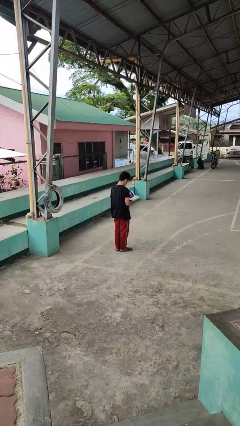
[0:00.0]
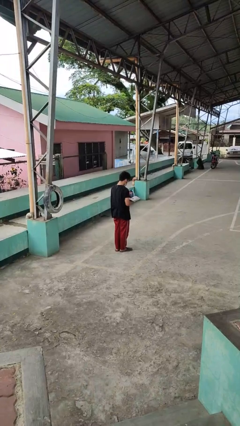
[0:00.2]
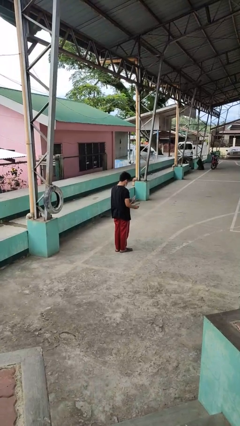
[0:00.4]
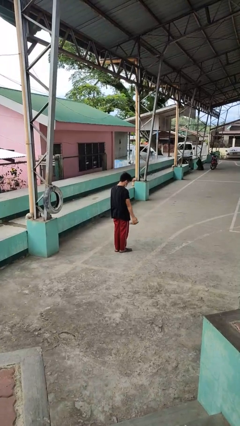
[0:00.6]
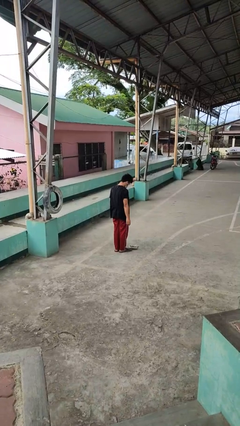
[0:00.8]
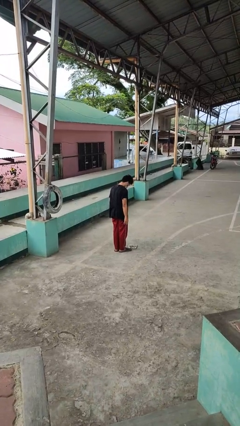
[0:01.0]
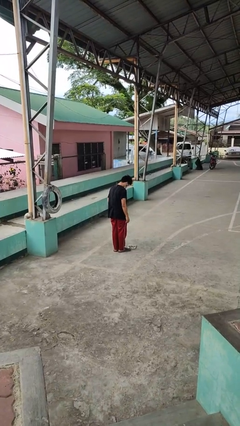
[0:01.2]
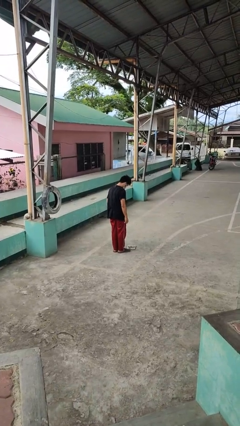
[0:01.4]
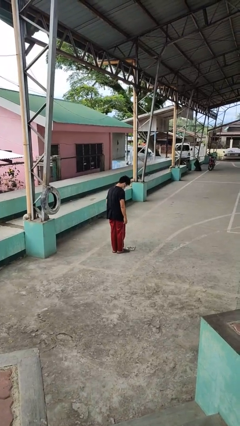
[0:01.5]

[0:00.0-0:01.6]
person drops object

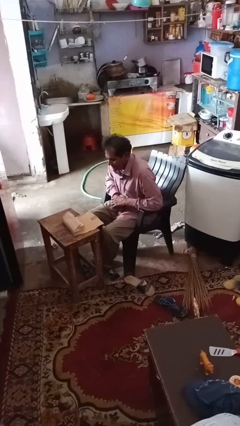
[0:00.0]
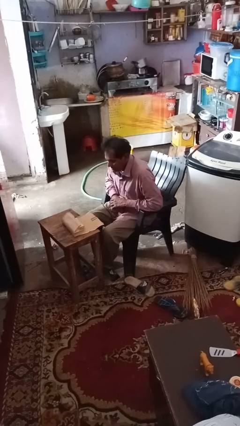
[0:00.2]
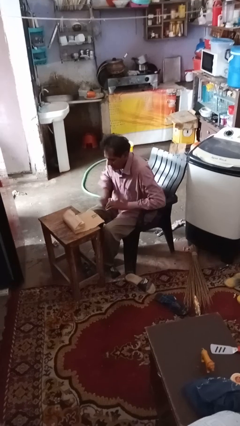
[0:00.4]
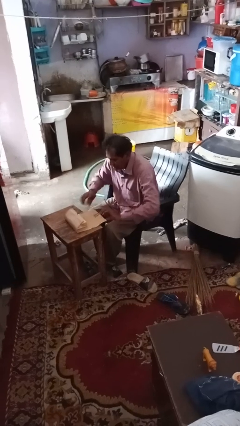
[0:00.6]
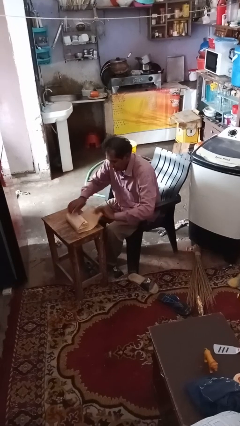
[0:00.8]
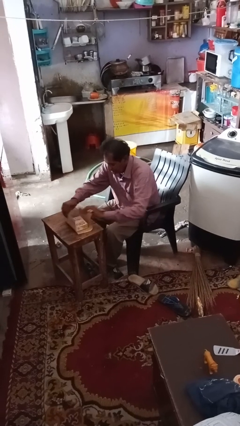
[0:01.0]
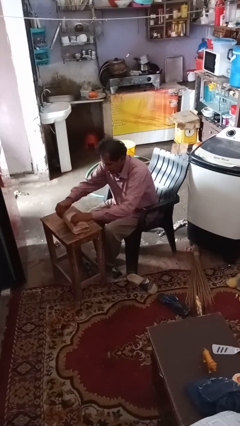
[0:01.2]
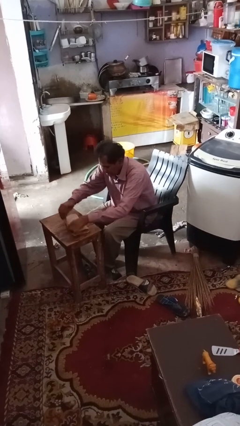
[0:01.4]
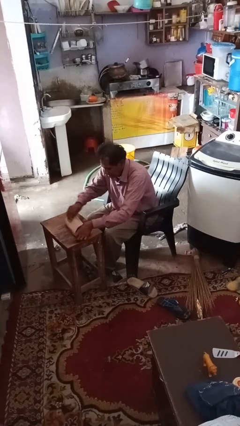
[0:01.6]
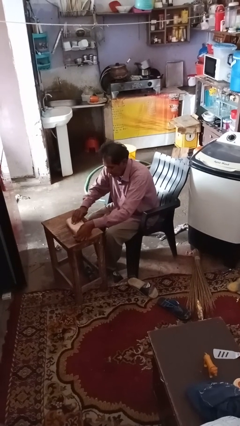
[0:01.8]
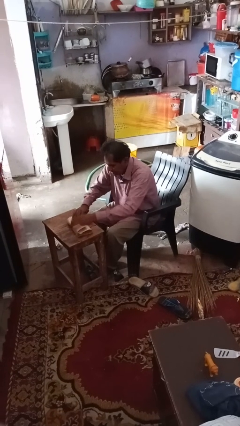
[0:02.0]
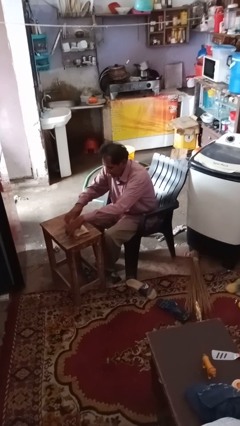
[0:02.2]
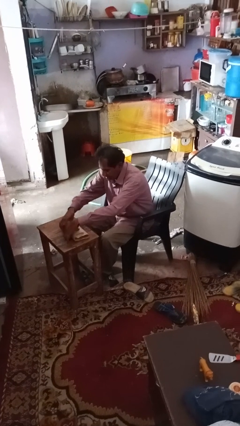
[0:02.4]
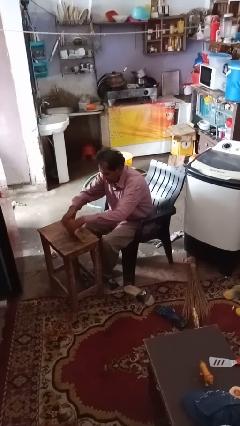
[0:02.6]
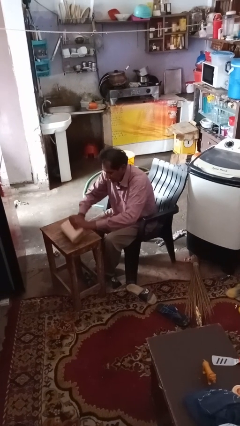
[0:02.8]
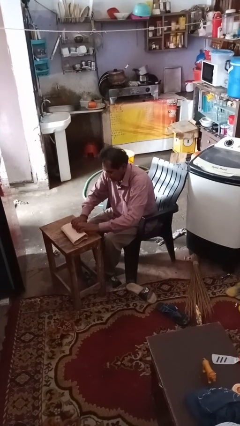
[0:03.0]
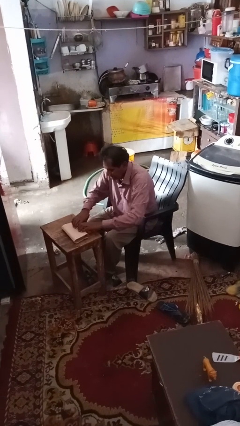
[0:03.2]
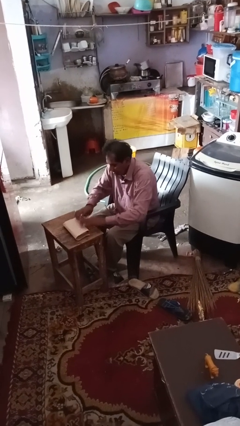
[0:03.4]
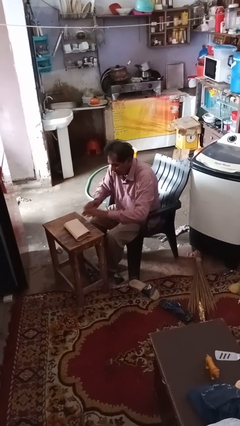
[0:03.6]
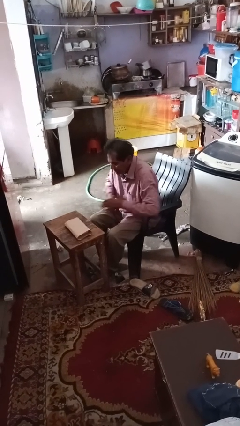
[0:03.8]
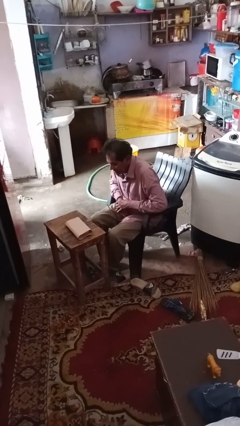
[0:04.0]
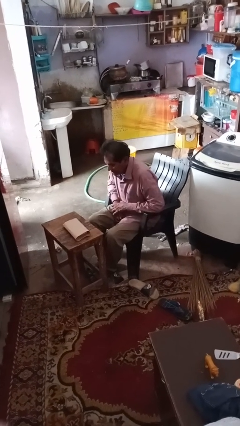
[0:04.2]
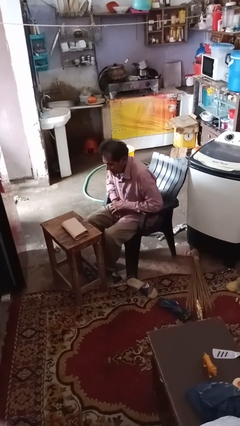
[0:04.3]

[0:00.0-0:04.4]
person wraps box

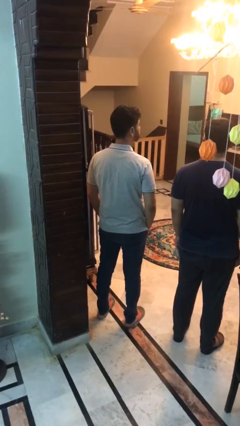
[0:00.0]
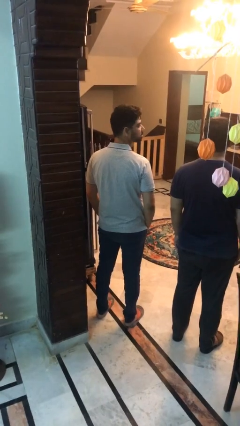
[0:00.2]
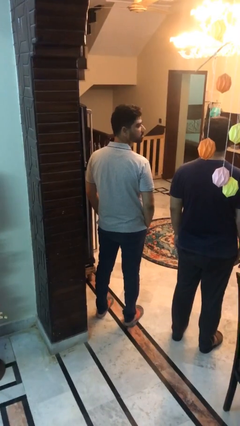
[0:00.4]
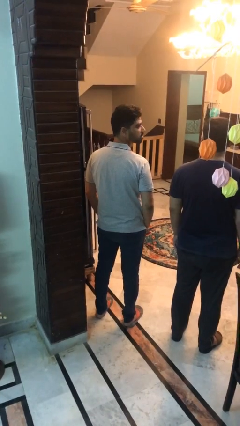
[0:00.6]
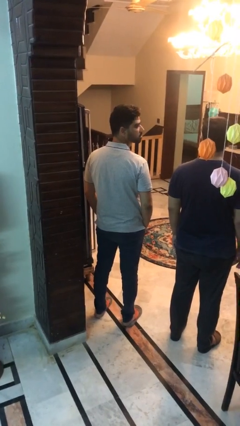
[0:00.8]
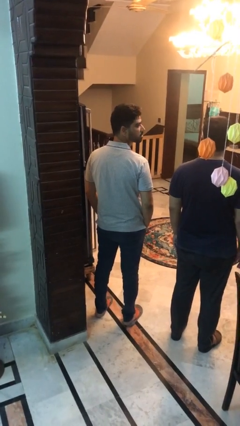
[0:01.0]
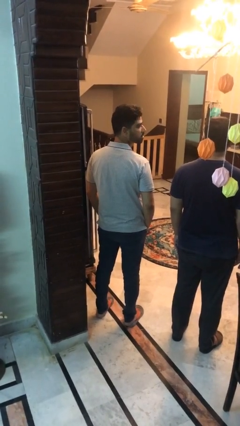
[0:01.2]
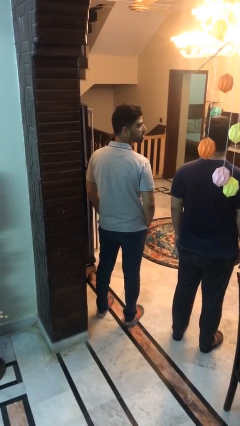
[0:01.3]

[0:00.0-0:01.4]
person looks over shoulder

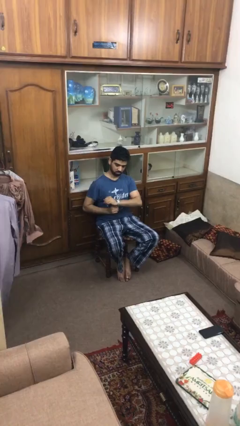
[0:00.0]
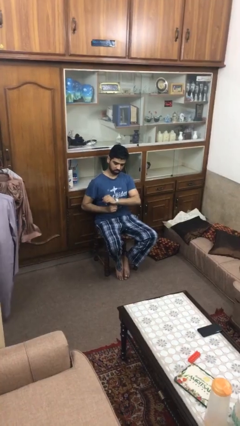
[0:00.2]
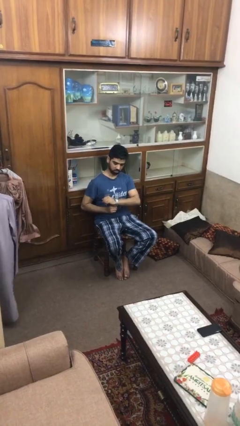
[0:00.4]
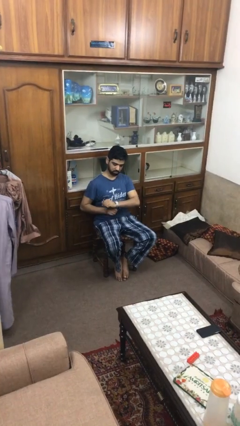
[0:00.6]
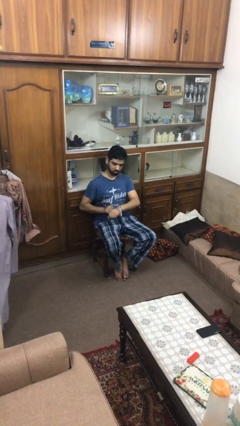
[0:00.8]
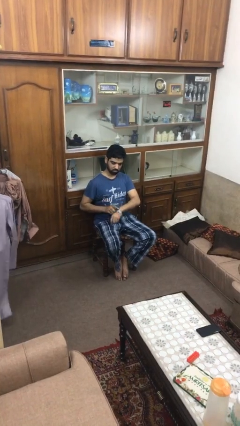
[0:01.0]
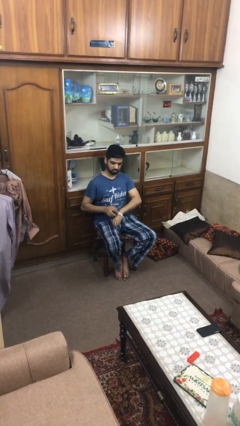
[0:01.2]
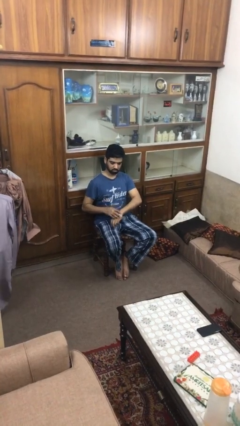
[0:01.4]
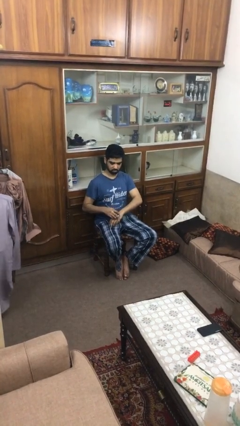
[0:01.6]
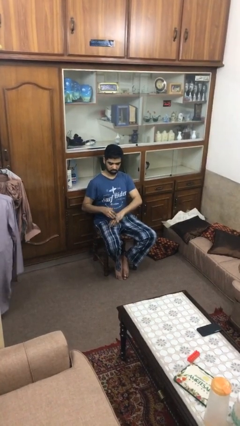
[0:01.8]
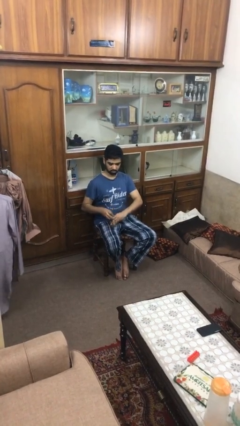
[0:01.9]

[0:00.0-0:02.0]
person takes off wristwatch

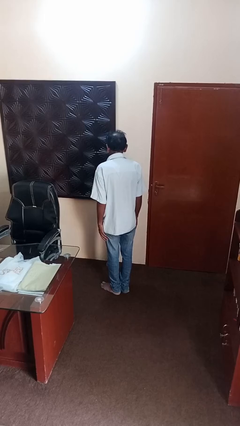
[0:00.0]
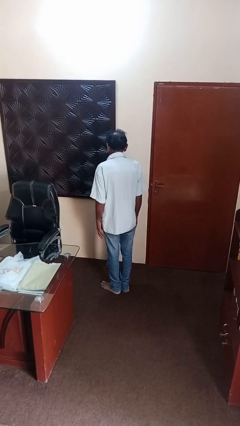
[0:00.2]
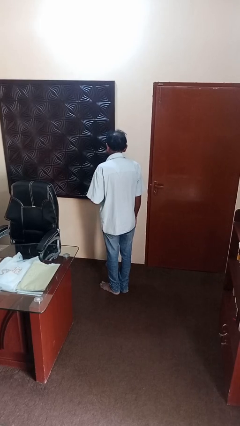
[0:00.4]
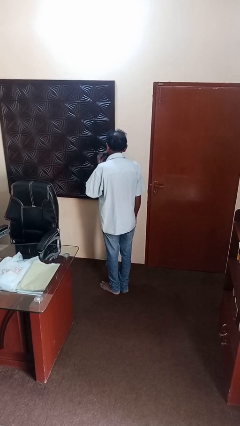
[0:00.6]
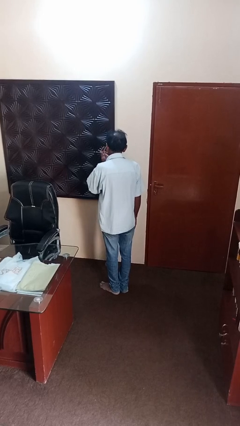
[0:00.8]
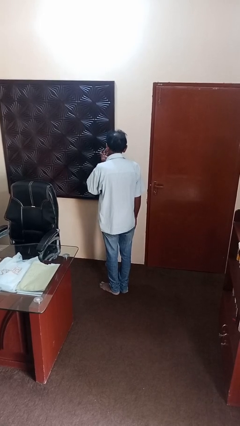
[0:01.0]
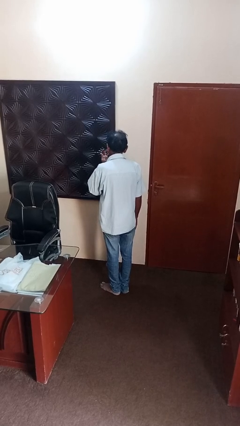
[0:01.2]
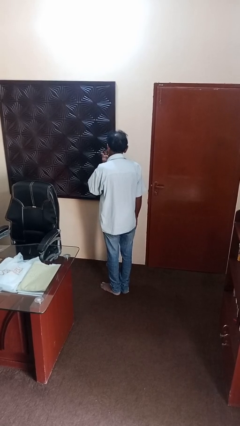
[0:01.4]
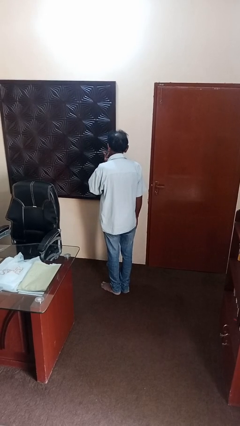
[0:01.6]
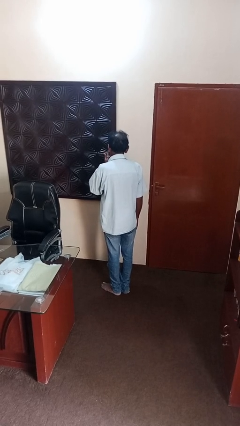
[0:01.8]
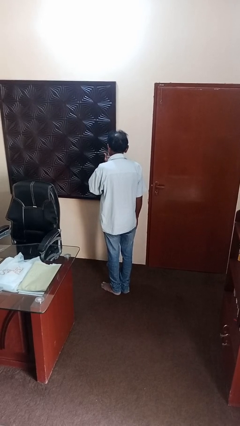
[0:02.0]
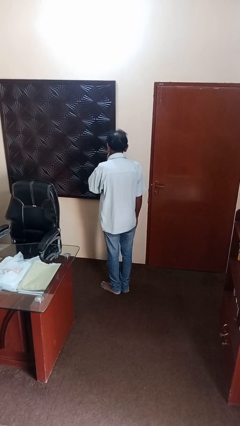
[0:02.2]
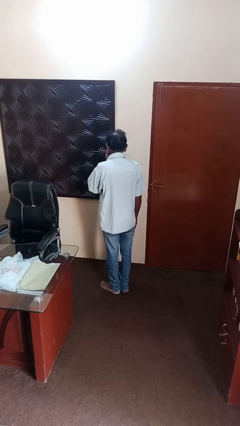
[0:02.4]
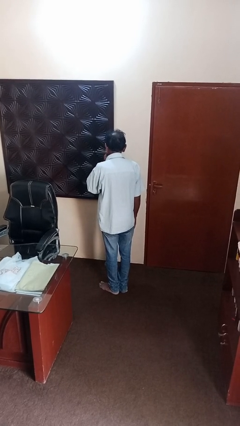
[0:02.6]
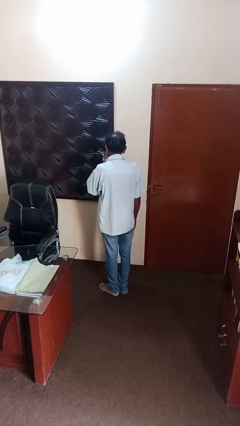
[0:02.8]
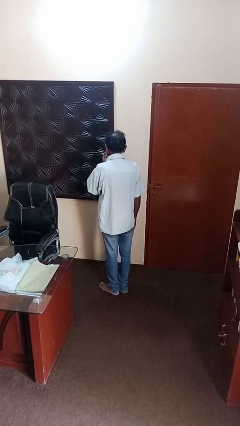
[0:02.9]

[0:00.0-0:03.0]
person licks fingers

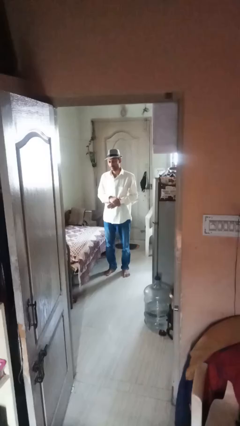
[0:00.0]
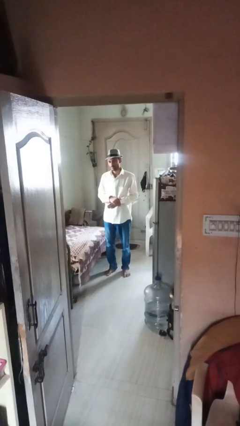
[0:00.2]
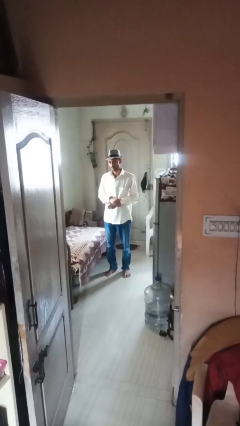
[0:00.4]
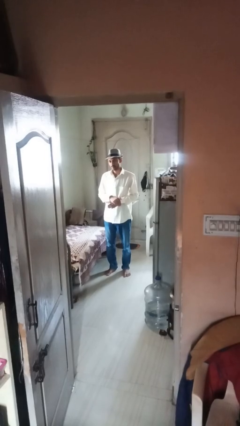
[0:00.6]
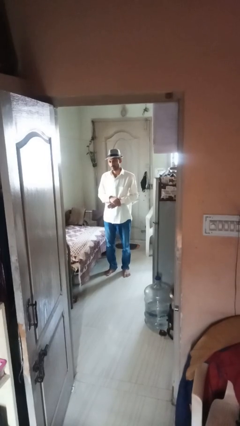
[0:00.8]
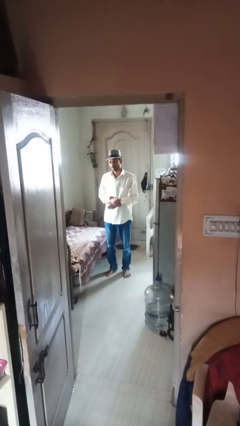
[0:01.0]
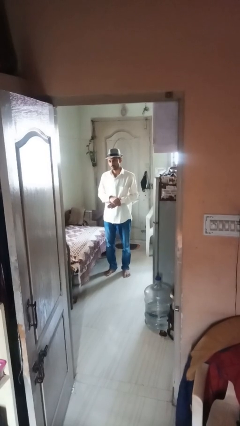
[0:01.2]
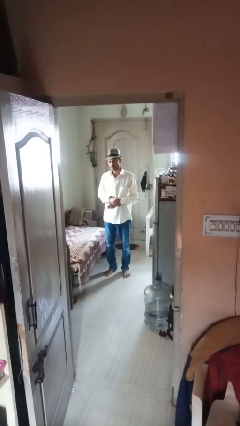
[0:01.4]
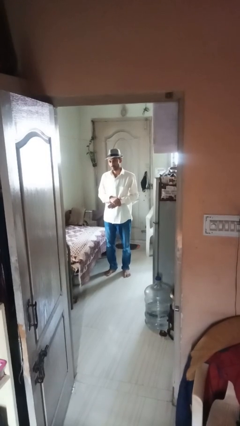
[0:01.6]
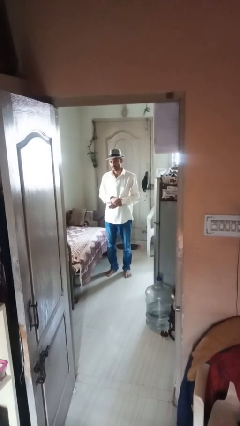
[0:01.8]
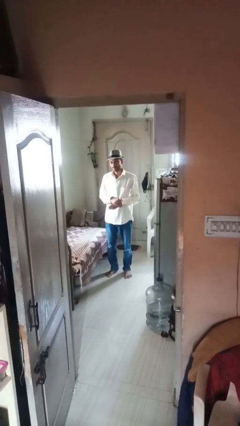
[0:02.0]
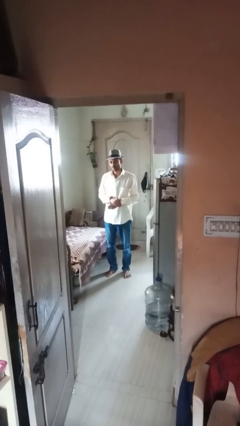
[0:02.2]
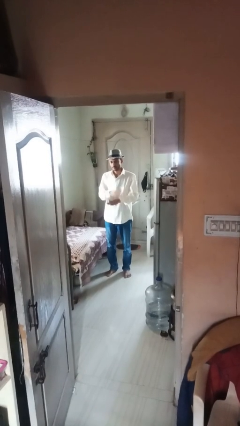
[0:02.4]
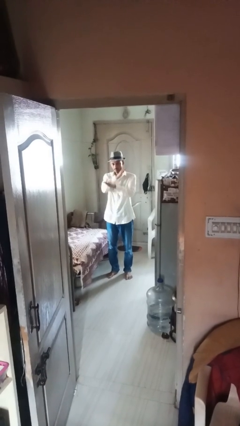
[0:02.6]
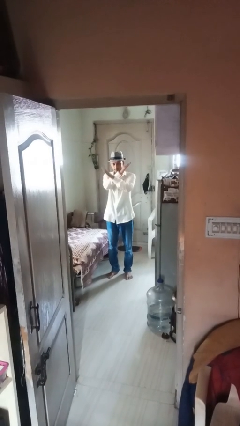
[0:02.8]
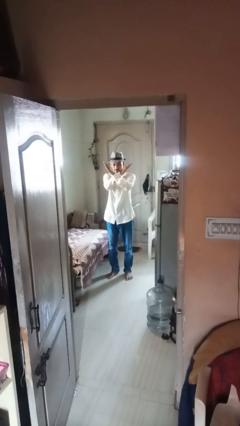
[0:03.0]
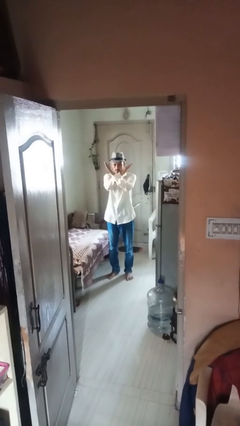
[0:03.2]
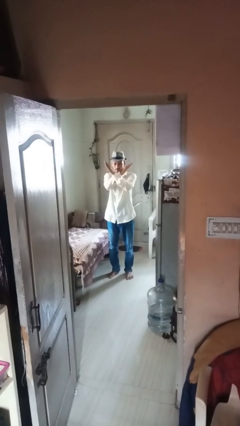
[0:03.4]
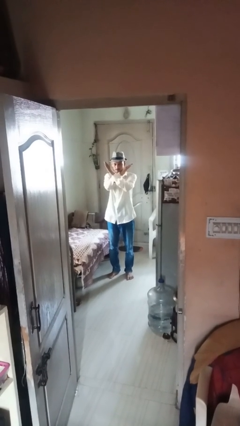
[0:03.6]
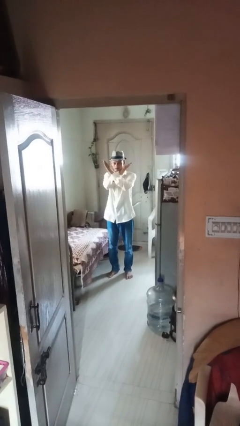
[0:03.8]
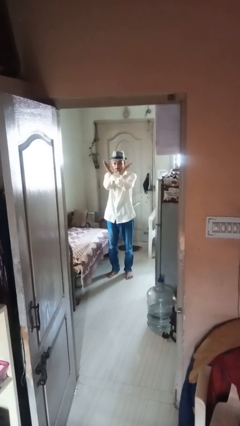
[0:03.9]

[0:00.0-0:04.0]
person gestures arms x

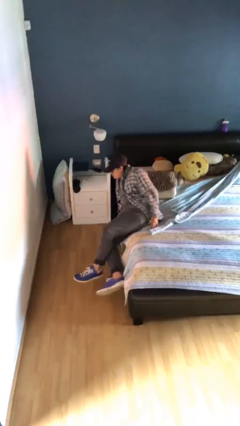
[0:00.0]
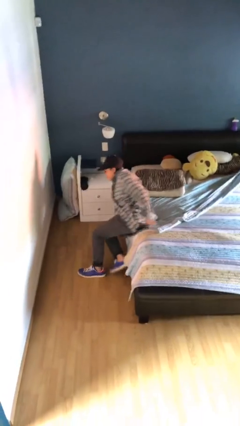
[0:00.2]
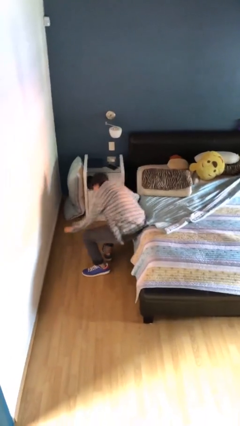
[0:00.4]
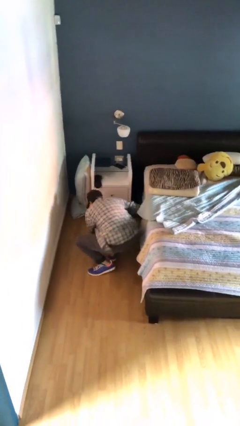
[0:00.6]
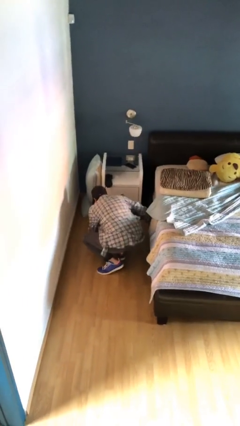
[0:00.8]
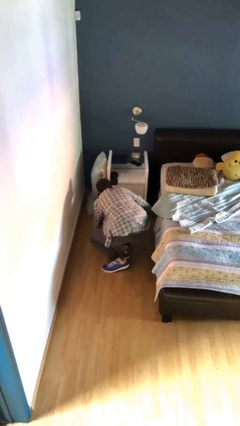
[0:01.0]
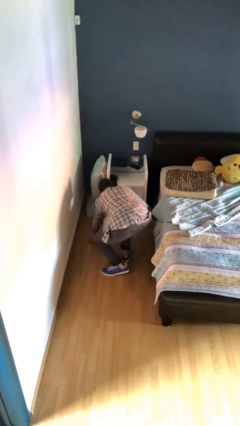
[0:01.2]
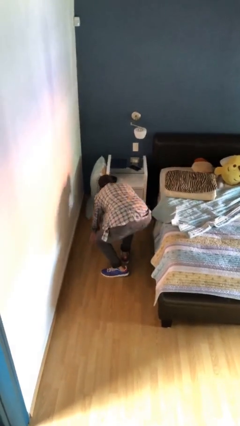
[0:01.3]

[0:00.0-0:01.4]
person falls from bed
